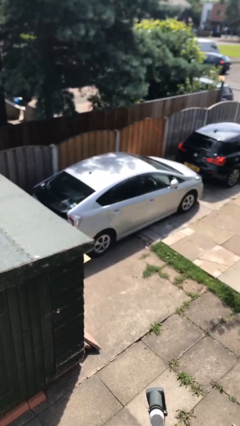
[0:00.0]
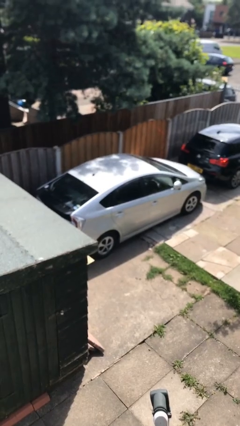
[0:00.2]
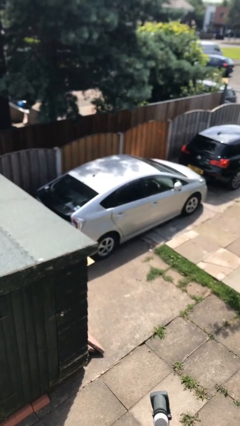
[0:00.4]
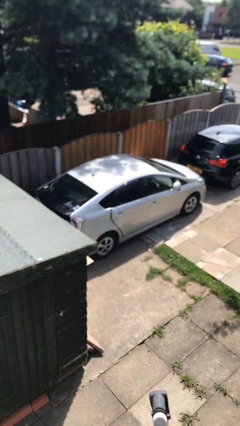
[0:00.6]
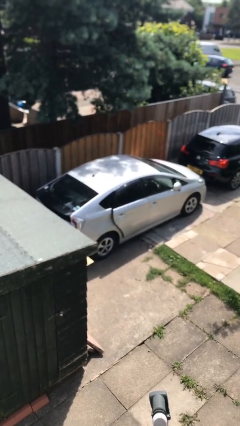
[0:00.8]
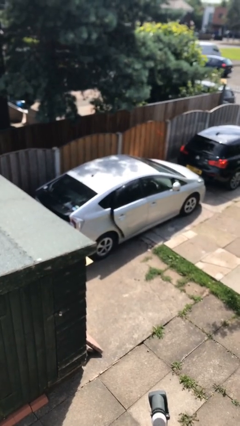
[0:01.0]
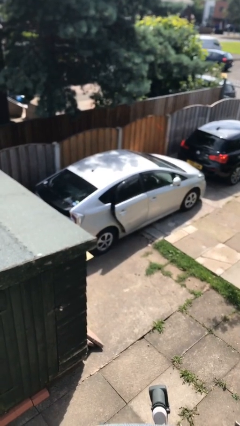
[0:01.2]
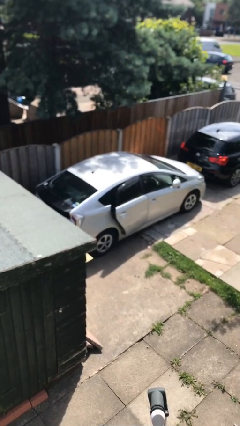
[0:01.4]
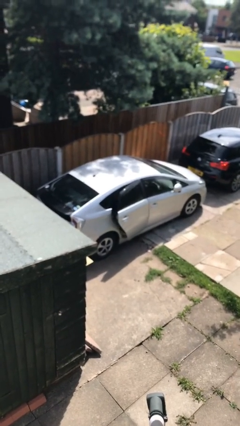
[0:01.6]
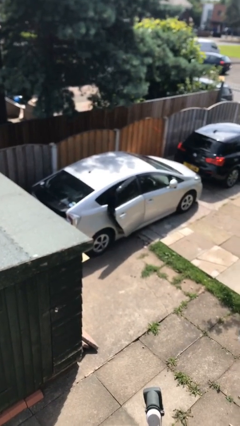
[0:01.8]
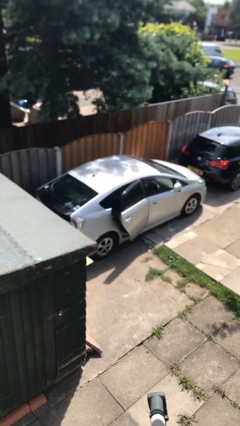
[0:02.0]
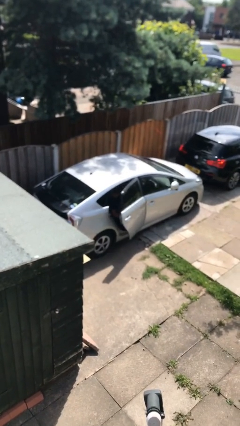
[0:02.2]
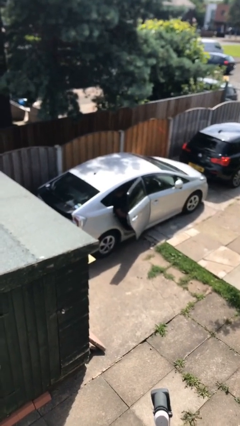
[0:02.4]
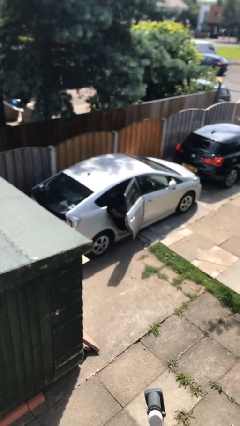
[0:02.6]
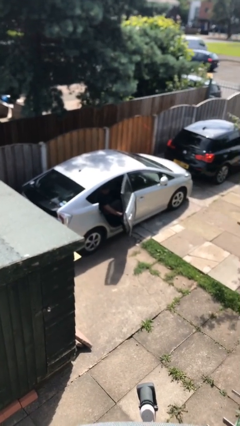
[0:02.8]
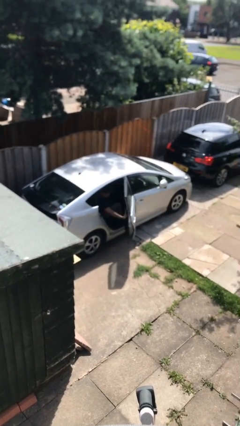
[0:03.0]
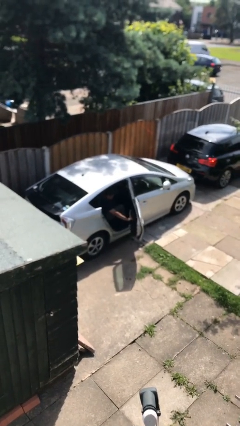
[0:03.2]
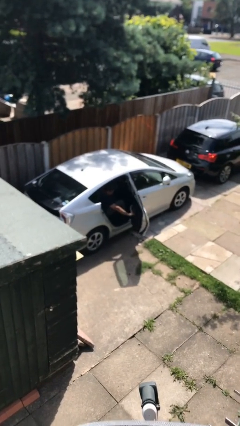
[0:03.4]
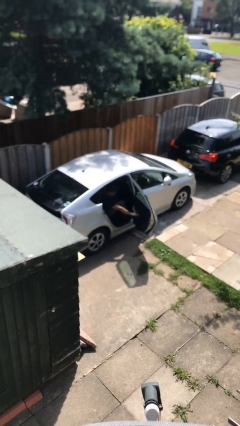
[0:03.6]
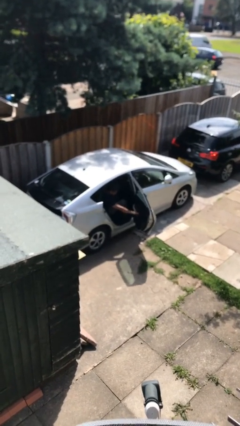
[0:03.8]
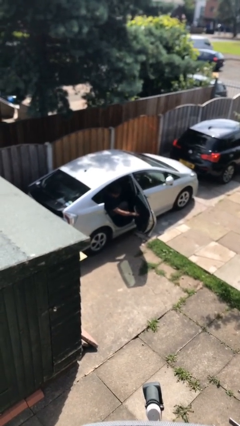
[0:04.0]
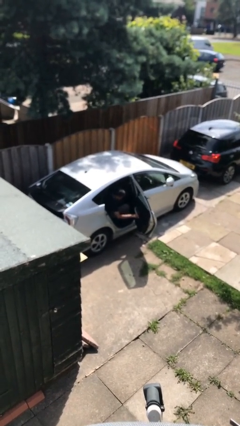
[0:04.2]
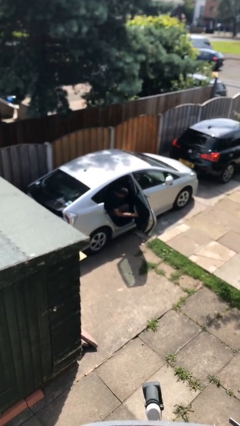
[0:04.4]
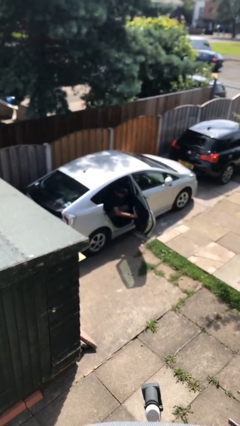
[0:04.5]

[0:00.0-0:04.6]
person opens car door

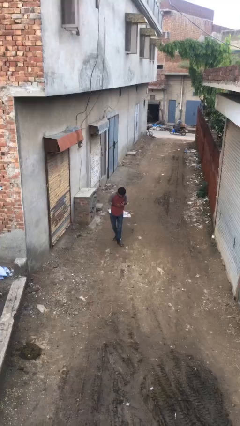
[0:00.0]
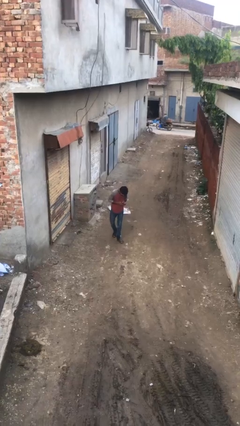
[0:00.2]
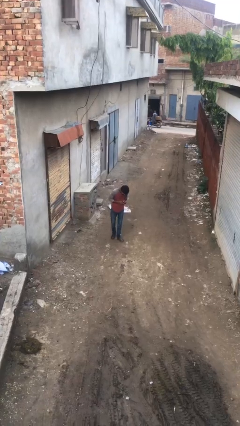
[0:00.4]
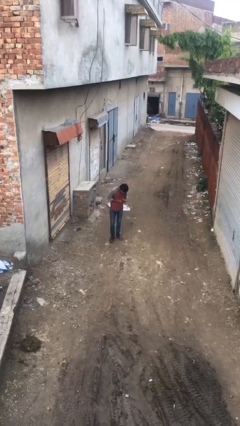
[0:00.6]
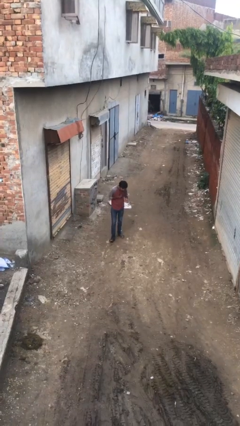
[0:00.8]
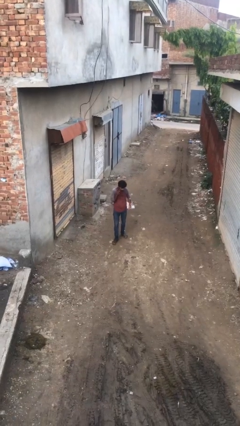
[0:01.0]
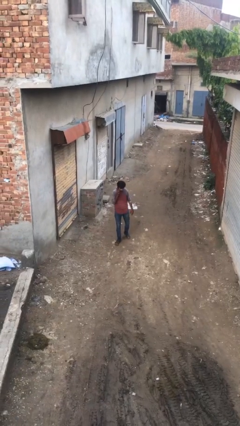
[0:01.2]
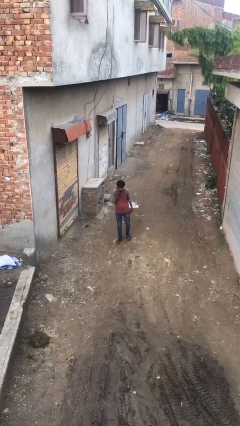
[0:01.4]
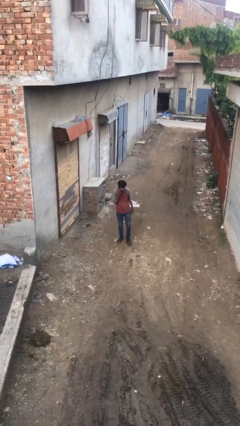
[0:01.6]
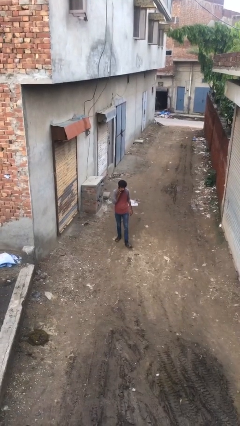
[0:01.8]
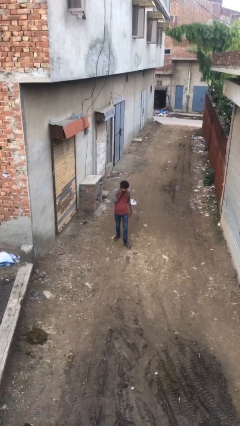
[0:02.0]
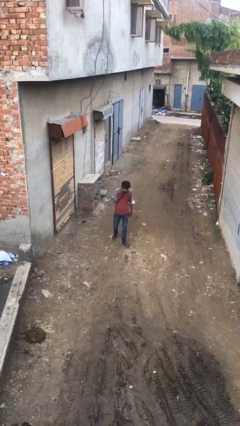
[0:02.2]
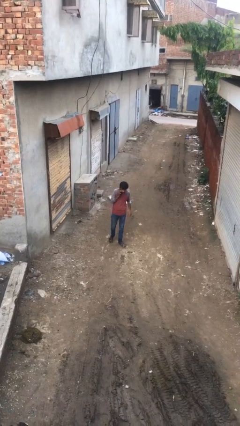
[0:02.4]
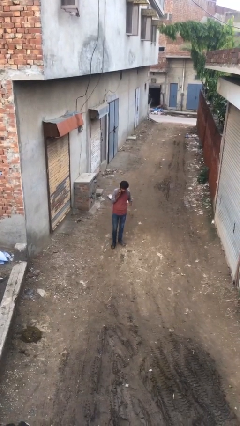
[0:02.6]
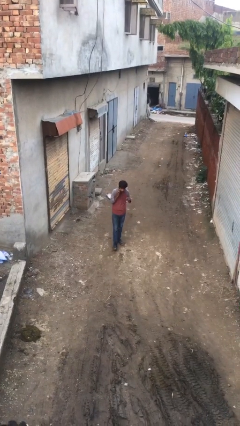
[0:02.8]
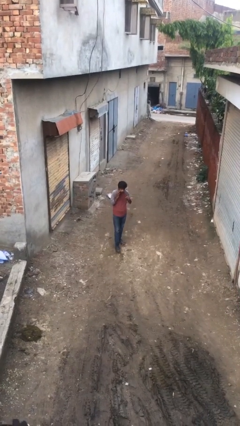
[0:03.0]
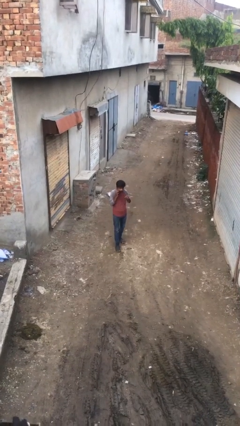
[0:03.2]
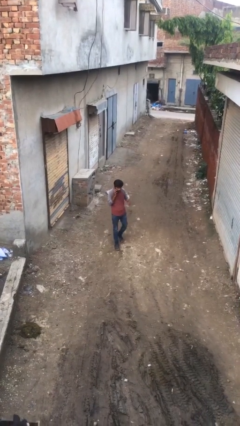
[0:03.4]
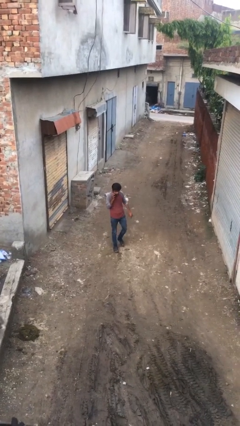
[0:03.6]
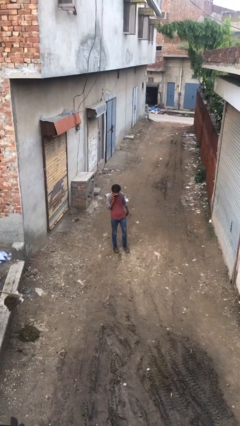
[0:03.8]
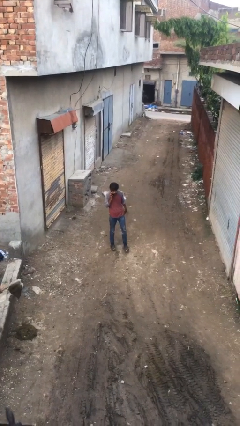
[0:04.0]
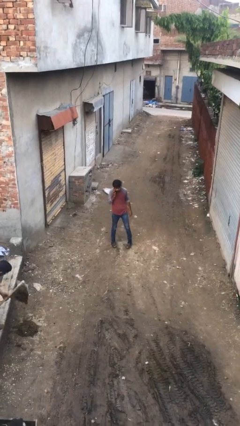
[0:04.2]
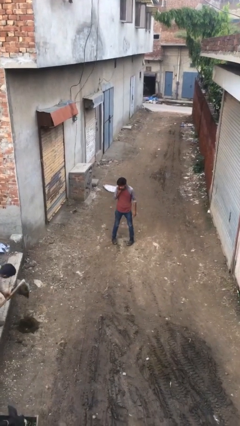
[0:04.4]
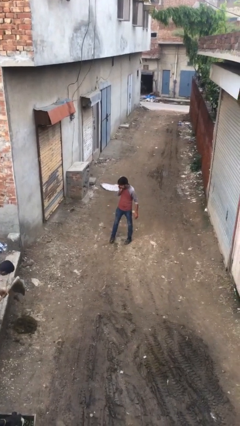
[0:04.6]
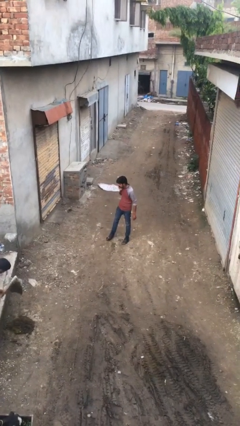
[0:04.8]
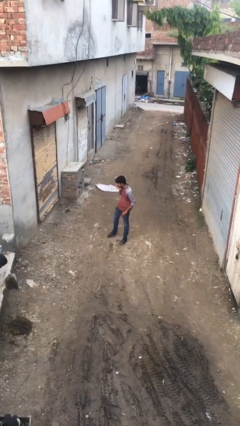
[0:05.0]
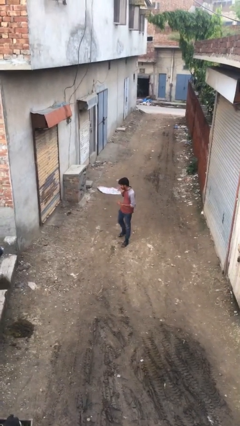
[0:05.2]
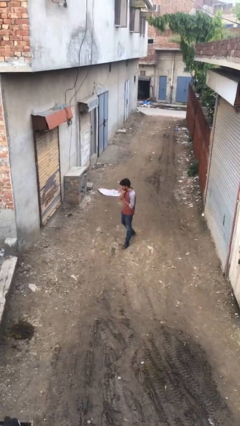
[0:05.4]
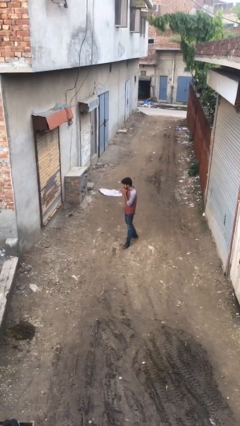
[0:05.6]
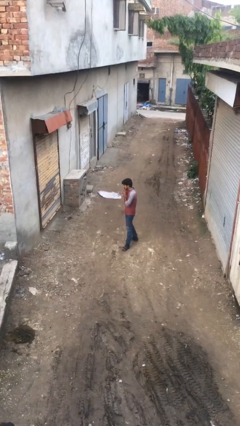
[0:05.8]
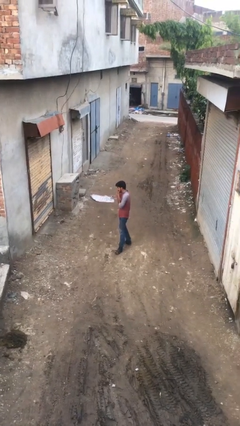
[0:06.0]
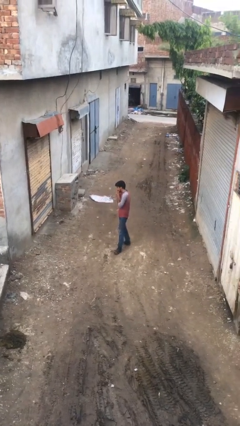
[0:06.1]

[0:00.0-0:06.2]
person talks on phone

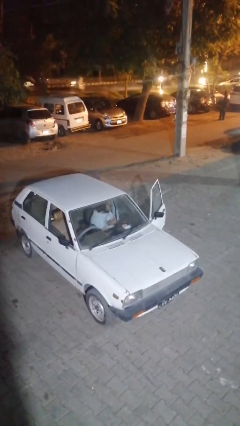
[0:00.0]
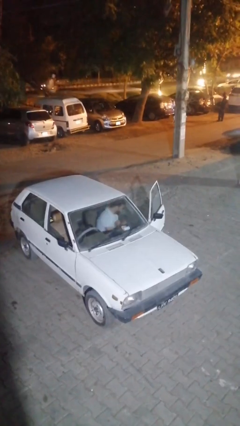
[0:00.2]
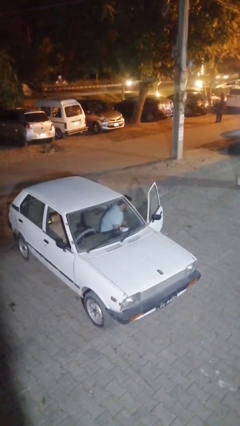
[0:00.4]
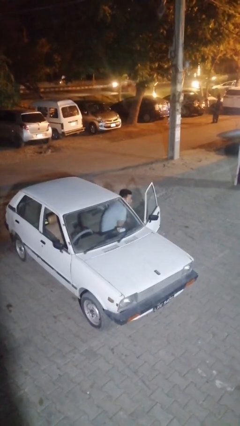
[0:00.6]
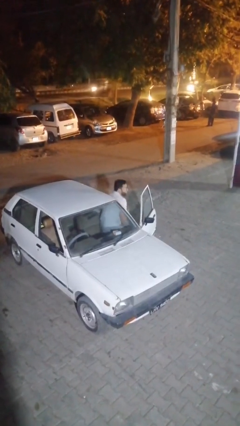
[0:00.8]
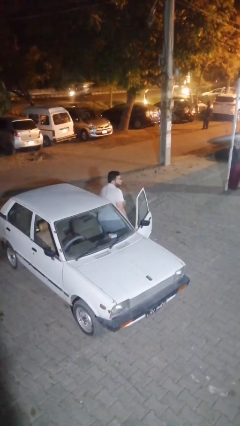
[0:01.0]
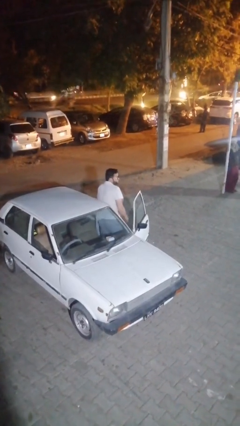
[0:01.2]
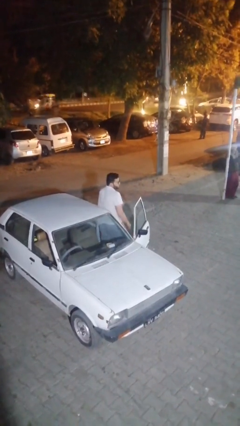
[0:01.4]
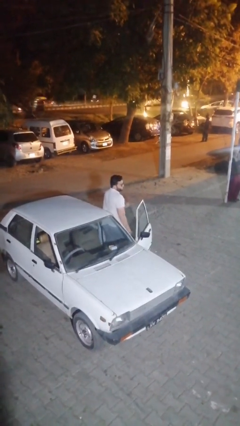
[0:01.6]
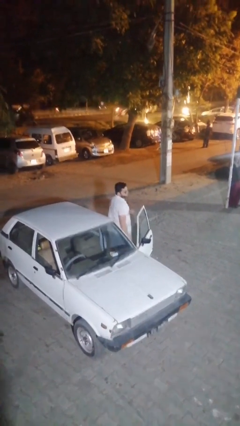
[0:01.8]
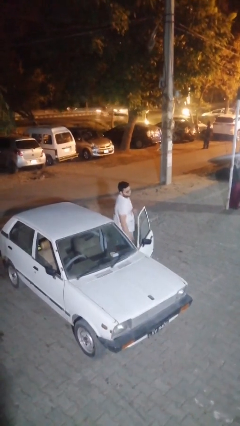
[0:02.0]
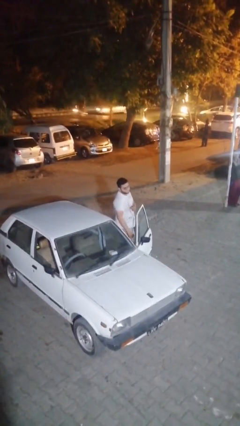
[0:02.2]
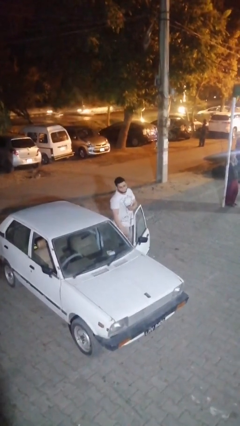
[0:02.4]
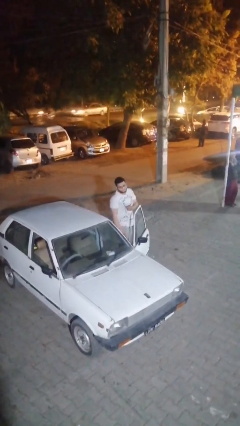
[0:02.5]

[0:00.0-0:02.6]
person exits car

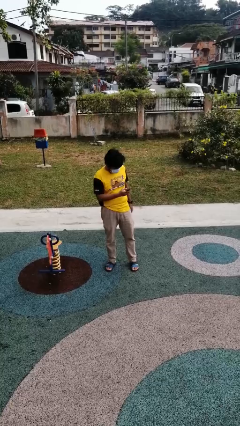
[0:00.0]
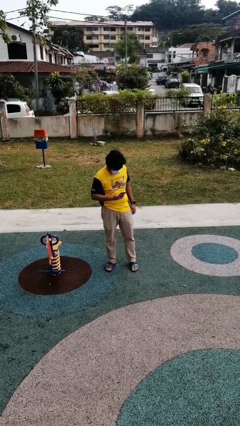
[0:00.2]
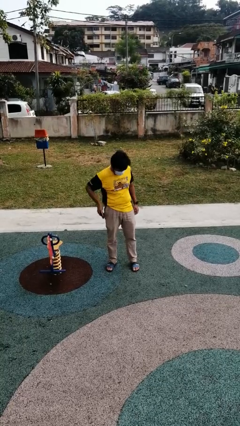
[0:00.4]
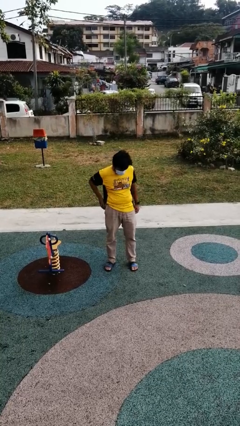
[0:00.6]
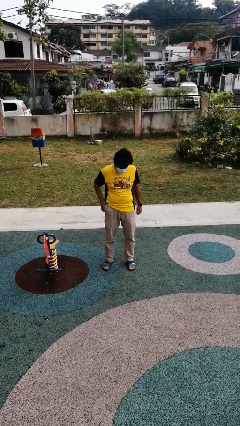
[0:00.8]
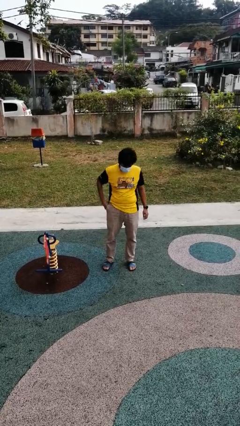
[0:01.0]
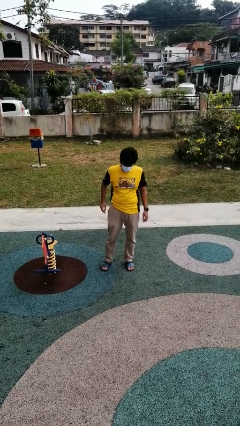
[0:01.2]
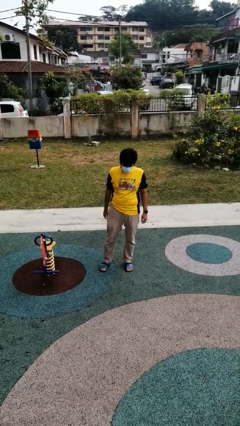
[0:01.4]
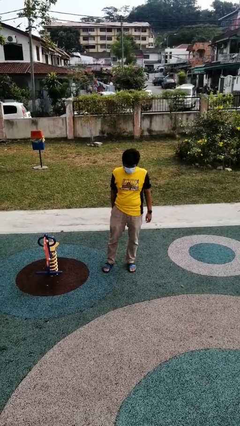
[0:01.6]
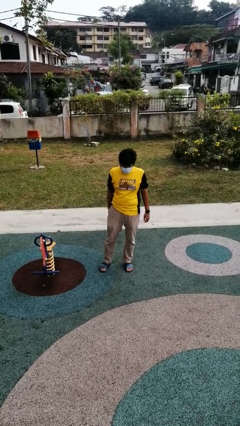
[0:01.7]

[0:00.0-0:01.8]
person puts phone into pocket

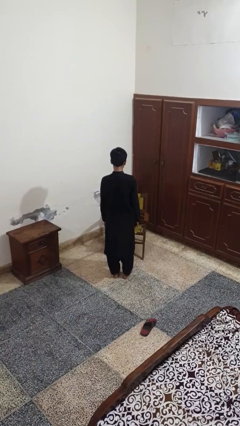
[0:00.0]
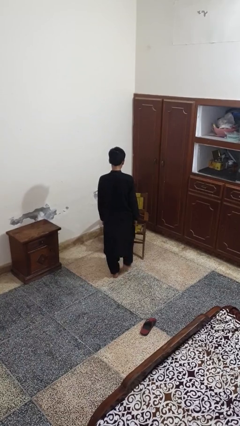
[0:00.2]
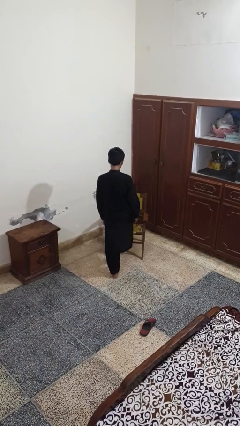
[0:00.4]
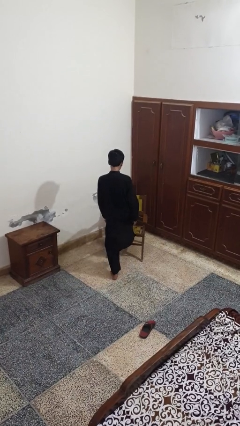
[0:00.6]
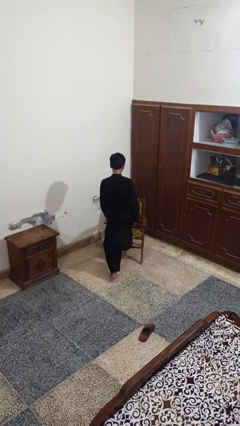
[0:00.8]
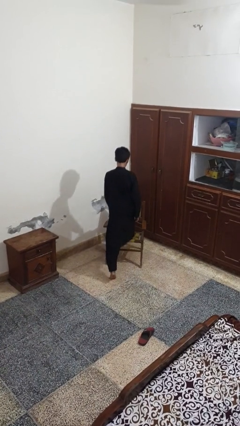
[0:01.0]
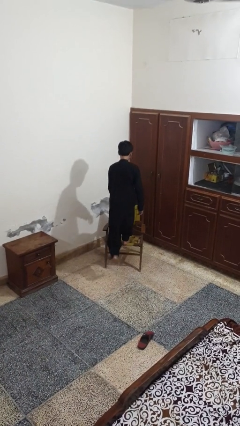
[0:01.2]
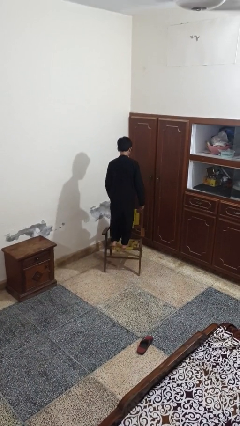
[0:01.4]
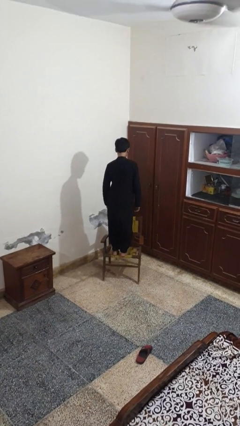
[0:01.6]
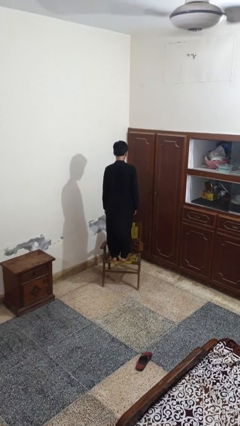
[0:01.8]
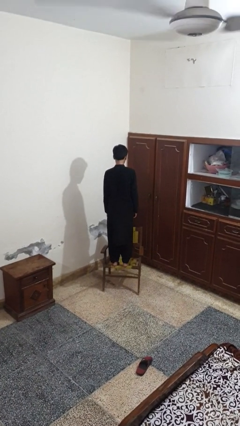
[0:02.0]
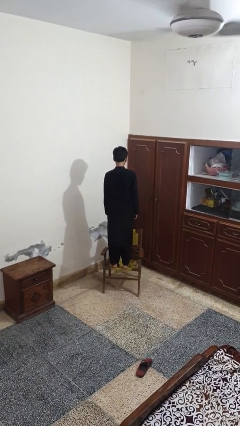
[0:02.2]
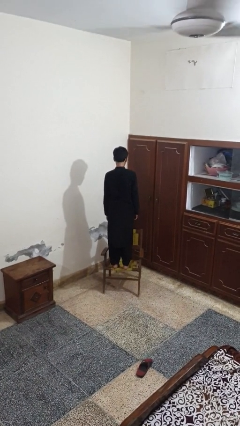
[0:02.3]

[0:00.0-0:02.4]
person climbs on chair
